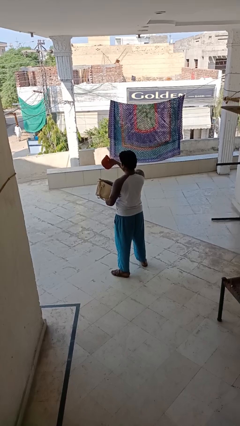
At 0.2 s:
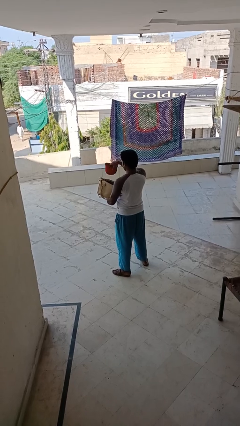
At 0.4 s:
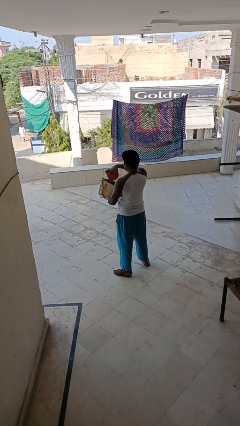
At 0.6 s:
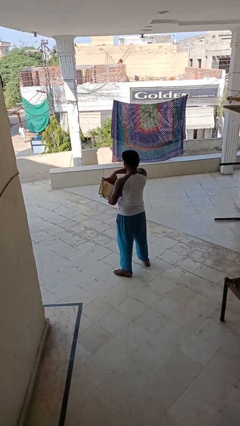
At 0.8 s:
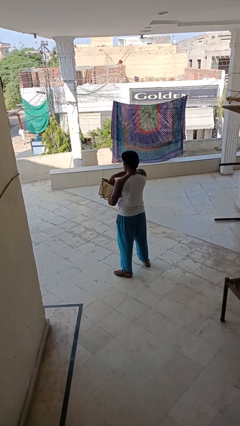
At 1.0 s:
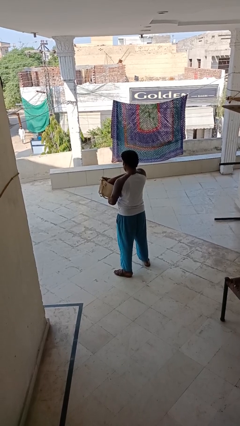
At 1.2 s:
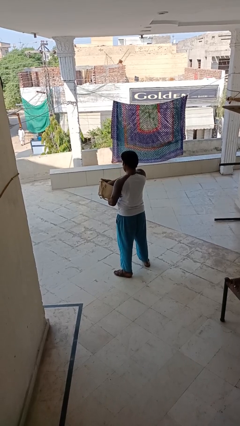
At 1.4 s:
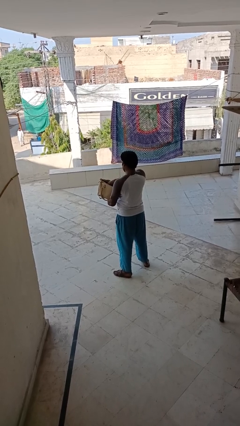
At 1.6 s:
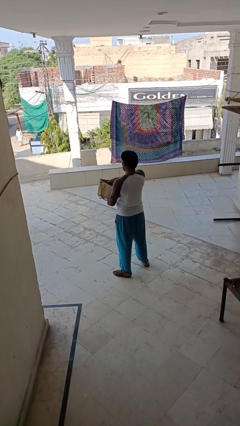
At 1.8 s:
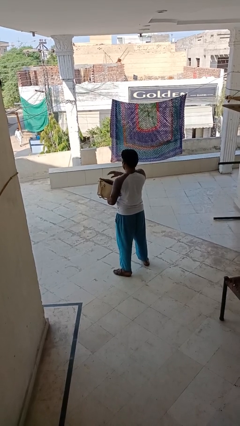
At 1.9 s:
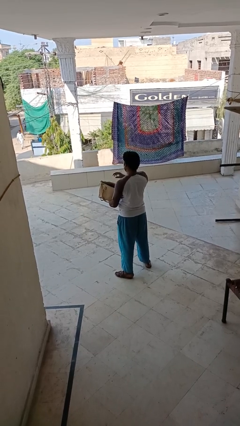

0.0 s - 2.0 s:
person puts object into purse

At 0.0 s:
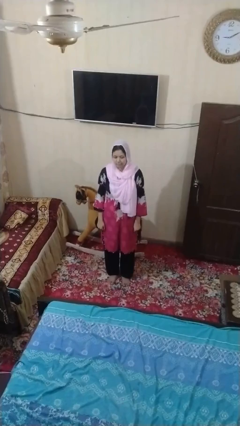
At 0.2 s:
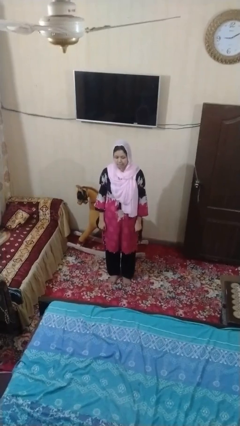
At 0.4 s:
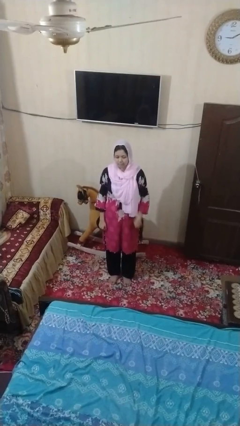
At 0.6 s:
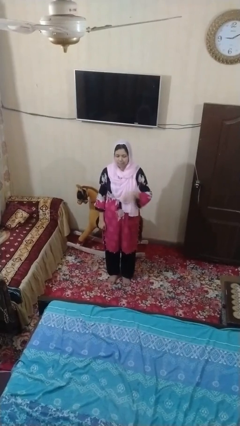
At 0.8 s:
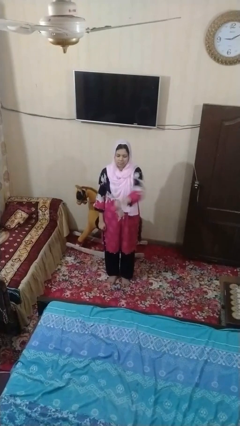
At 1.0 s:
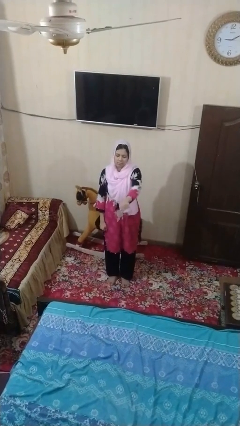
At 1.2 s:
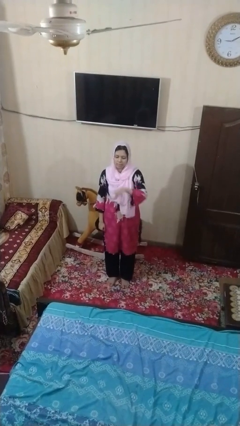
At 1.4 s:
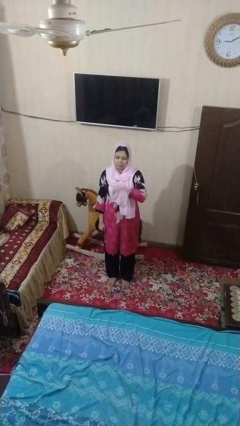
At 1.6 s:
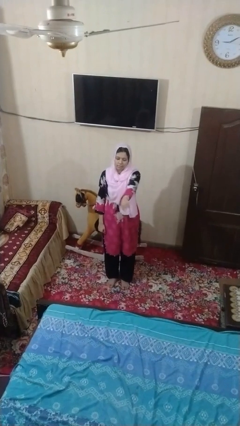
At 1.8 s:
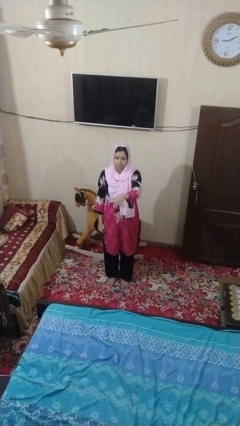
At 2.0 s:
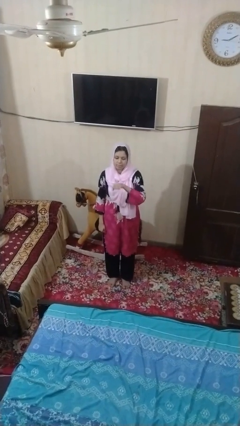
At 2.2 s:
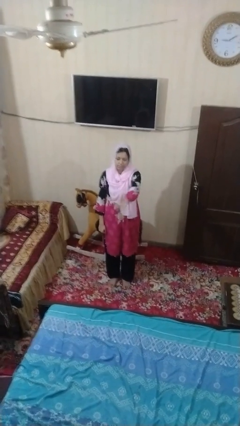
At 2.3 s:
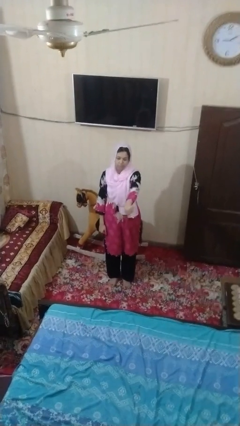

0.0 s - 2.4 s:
person punches

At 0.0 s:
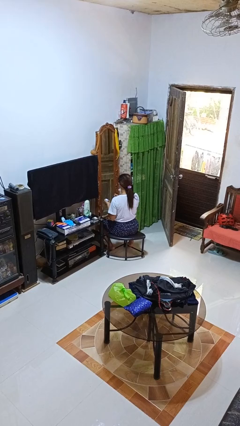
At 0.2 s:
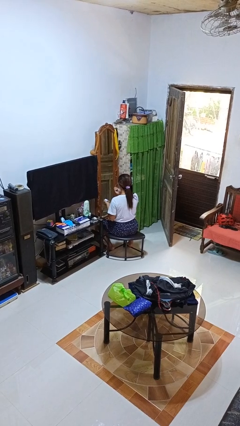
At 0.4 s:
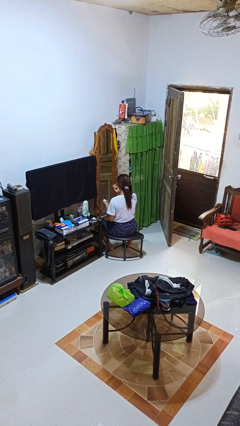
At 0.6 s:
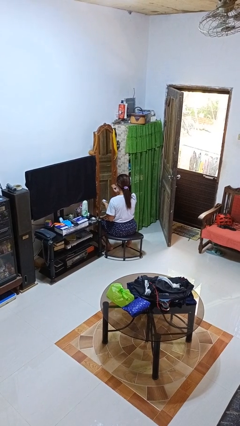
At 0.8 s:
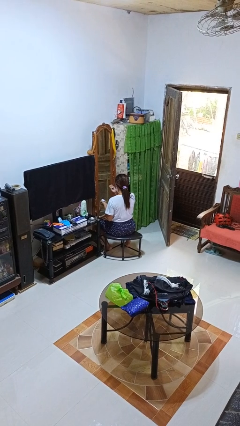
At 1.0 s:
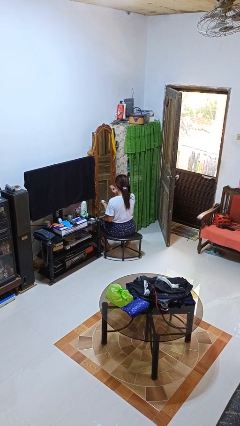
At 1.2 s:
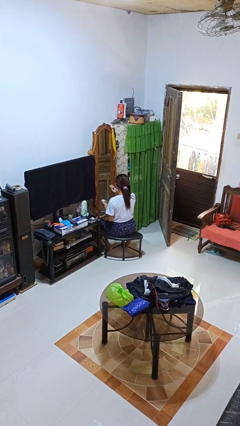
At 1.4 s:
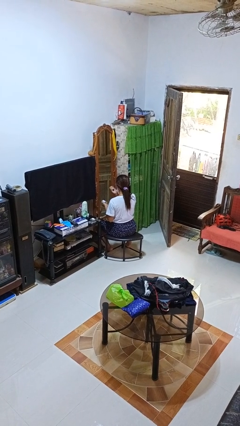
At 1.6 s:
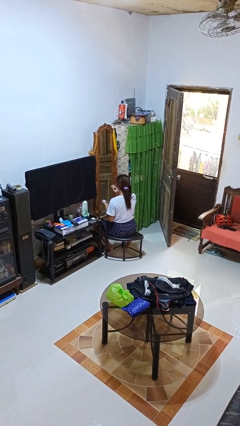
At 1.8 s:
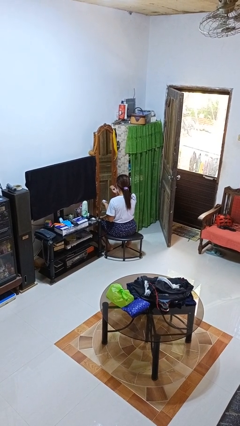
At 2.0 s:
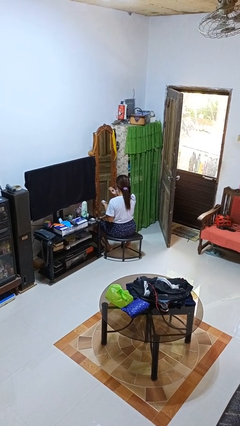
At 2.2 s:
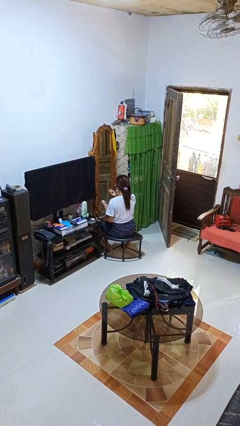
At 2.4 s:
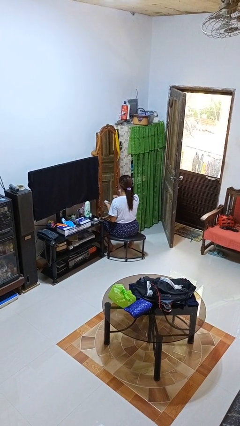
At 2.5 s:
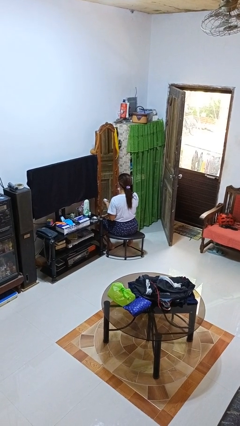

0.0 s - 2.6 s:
person applies eye makeup

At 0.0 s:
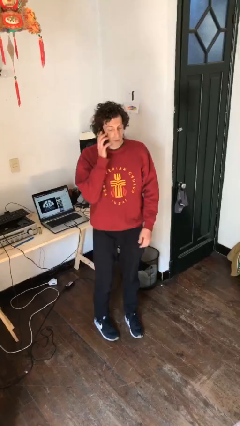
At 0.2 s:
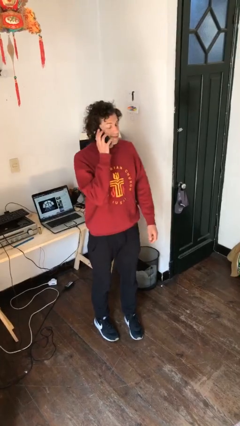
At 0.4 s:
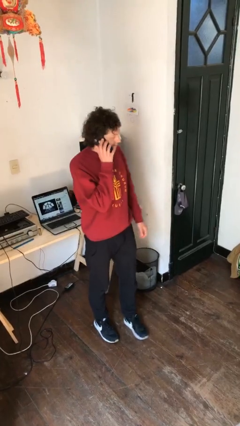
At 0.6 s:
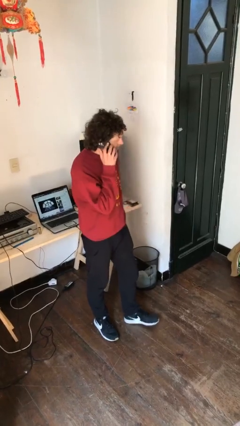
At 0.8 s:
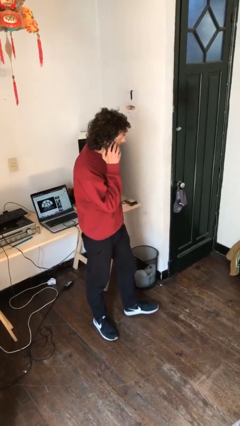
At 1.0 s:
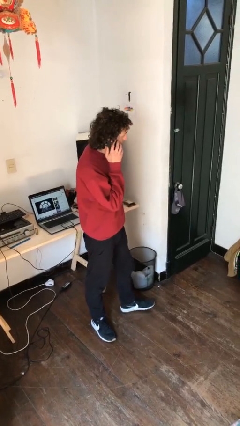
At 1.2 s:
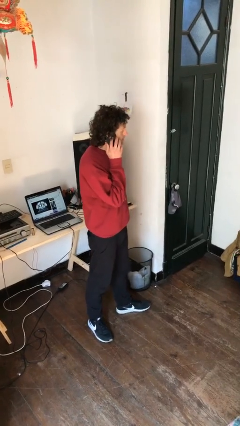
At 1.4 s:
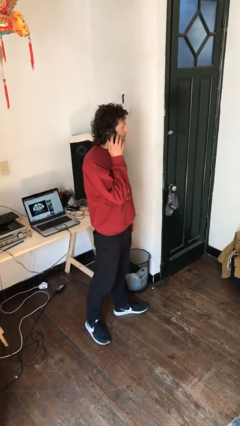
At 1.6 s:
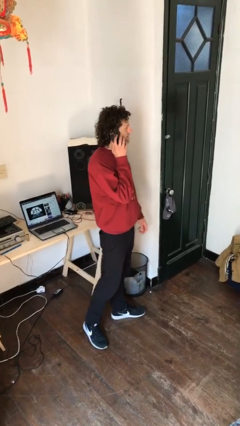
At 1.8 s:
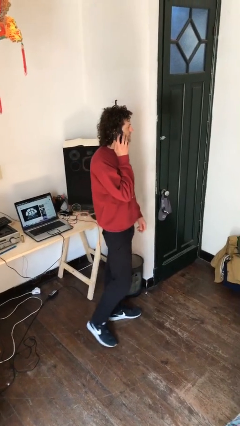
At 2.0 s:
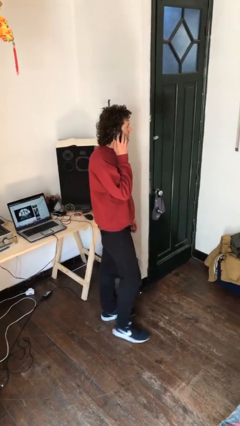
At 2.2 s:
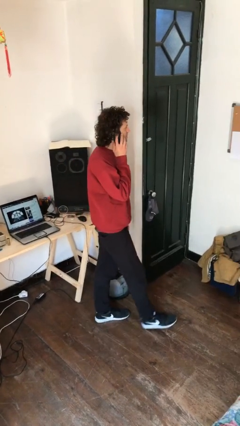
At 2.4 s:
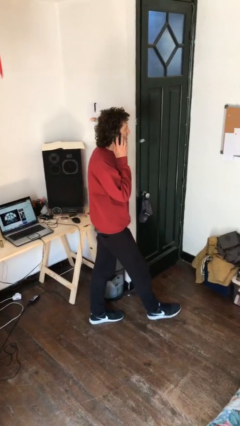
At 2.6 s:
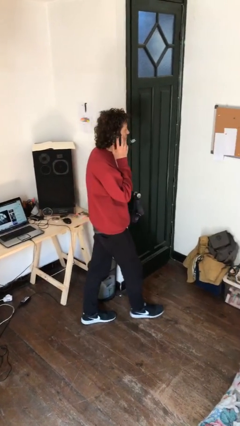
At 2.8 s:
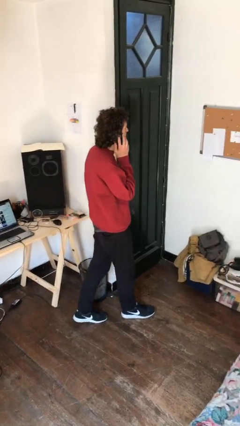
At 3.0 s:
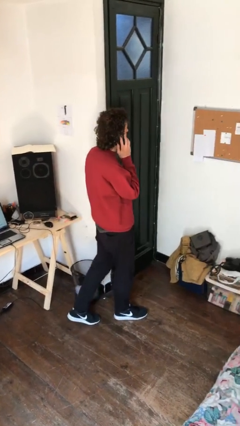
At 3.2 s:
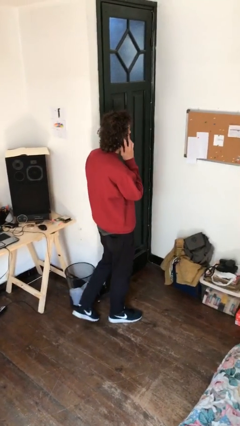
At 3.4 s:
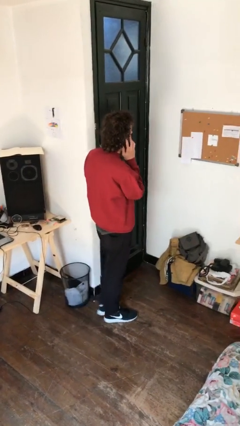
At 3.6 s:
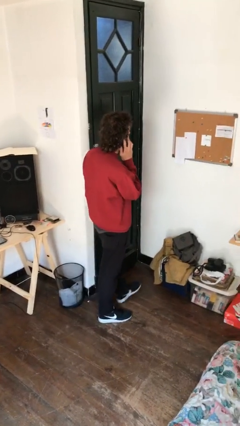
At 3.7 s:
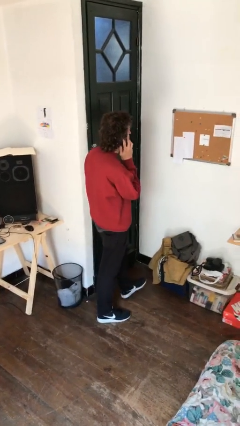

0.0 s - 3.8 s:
person talks on phone

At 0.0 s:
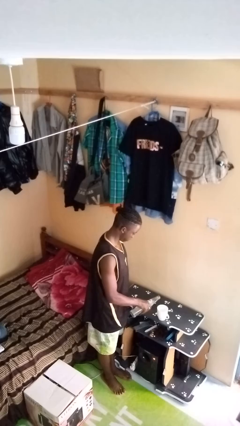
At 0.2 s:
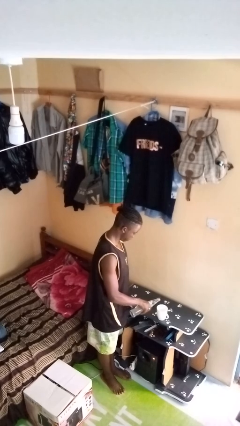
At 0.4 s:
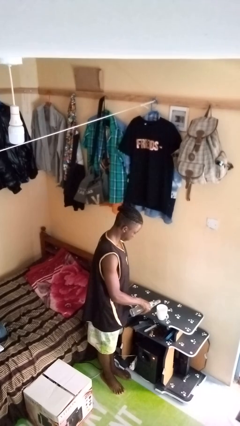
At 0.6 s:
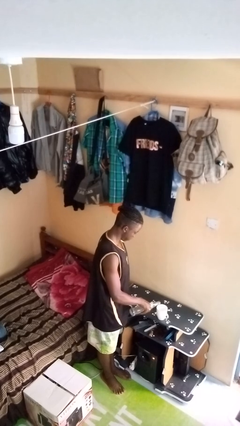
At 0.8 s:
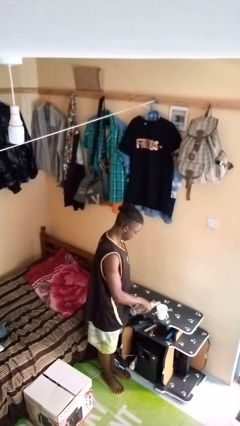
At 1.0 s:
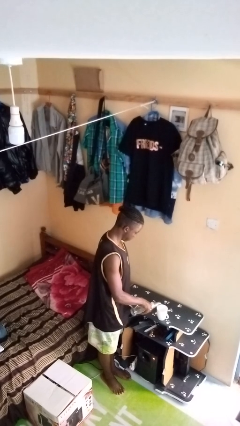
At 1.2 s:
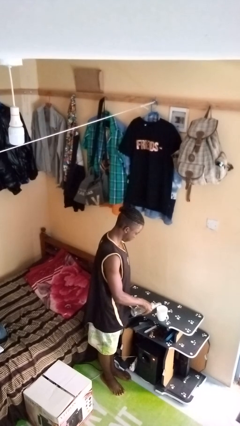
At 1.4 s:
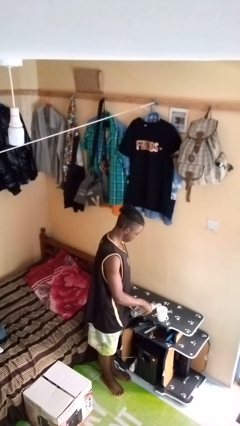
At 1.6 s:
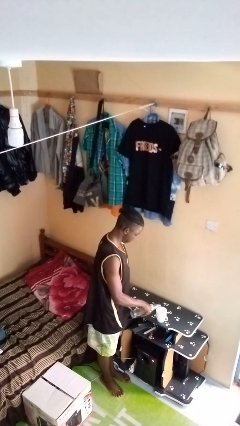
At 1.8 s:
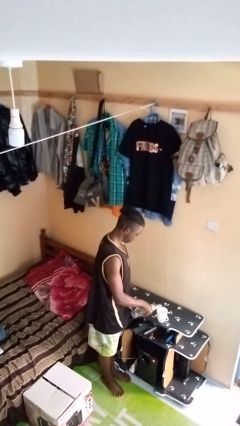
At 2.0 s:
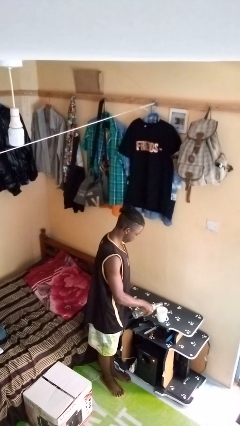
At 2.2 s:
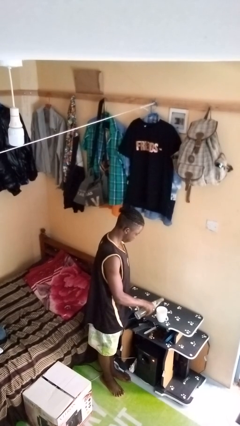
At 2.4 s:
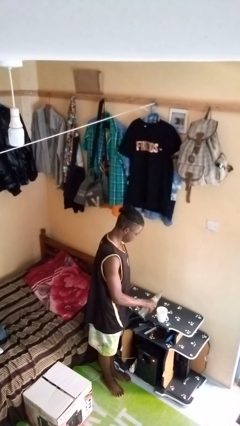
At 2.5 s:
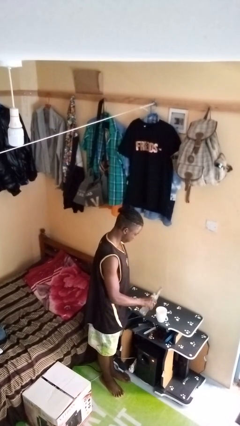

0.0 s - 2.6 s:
person pours liquid into cup

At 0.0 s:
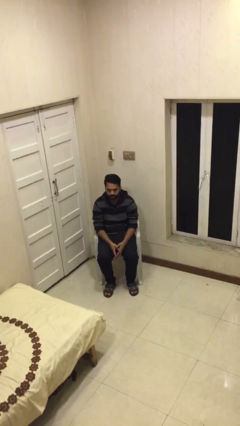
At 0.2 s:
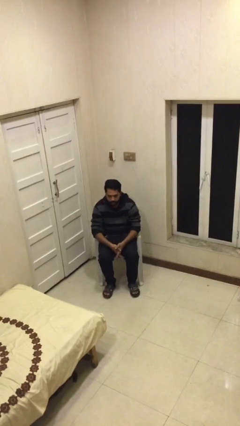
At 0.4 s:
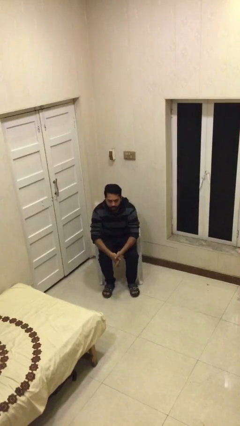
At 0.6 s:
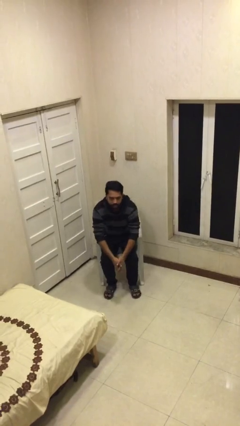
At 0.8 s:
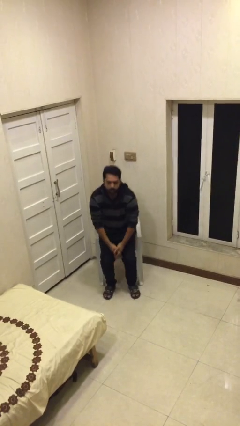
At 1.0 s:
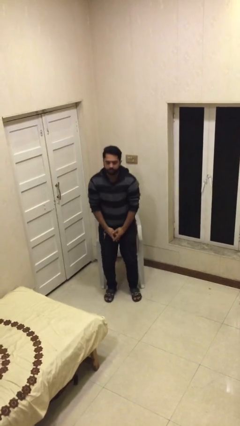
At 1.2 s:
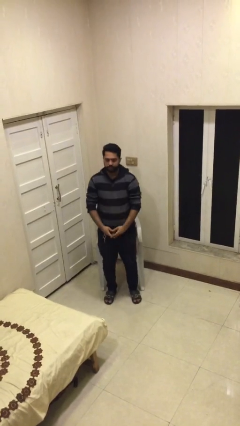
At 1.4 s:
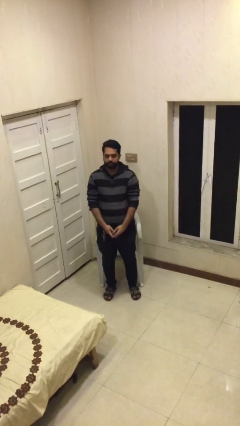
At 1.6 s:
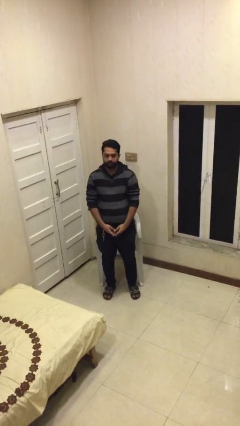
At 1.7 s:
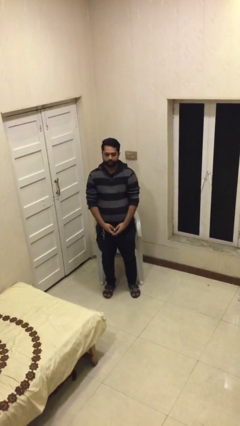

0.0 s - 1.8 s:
person stands up

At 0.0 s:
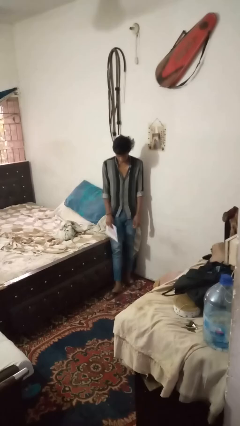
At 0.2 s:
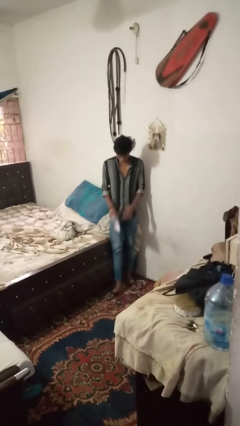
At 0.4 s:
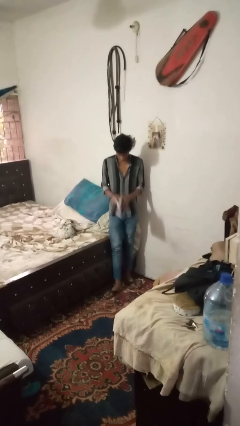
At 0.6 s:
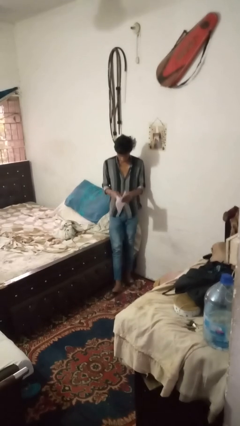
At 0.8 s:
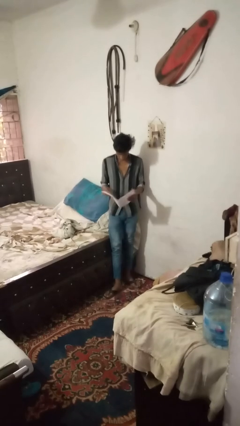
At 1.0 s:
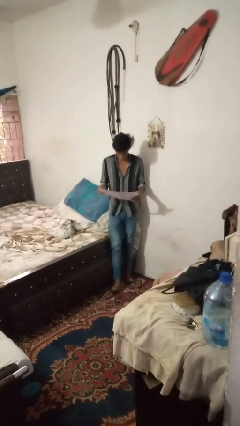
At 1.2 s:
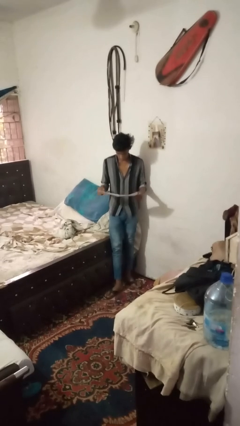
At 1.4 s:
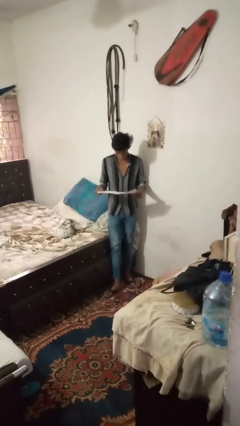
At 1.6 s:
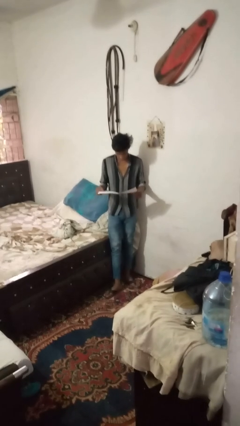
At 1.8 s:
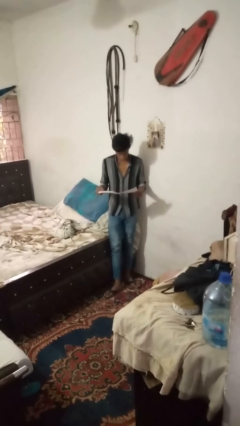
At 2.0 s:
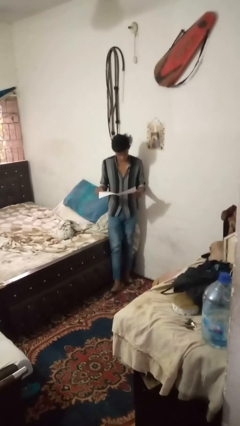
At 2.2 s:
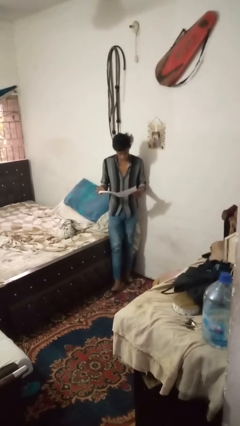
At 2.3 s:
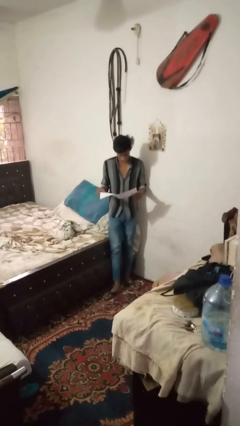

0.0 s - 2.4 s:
person reads newspaper
